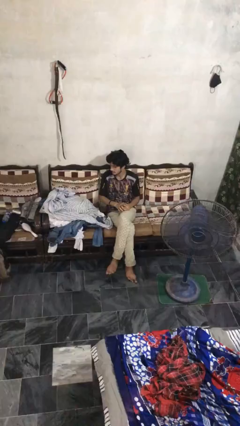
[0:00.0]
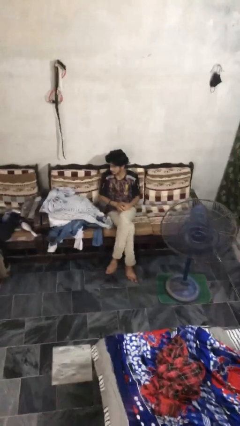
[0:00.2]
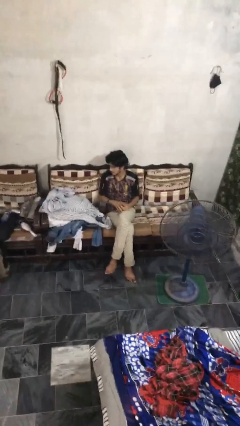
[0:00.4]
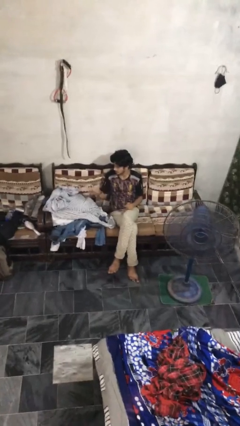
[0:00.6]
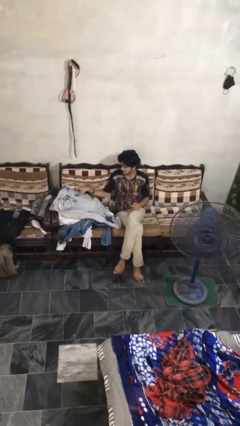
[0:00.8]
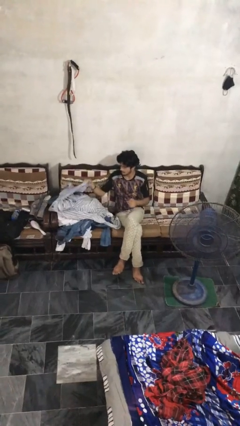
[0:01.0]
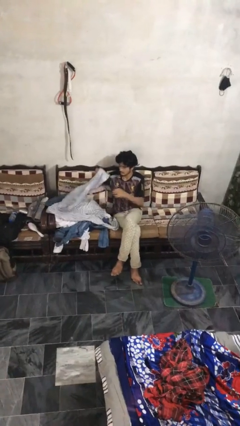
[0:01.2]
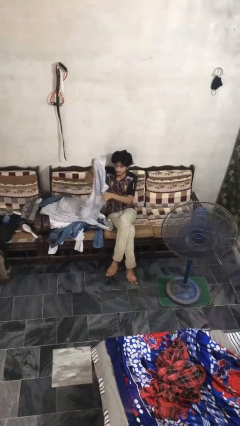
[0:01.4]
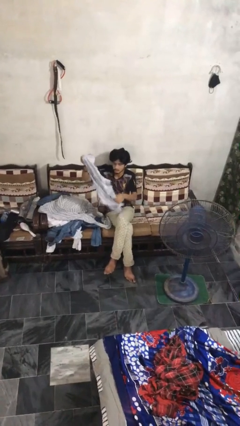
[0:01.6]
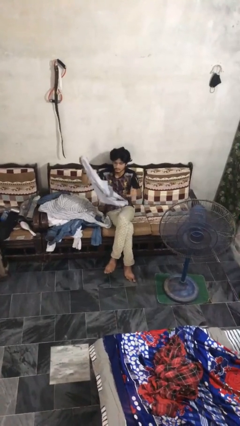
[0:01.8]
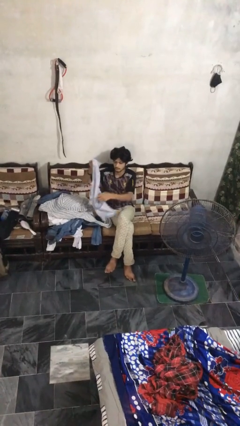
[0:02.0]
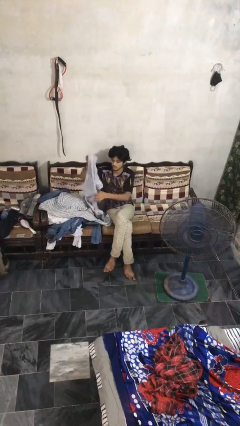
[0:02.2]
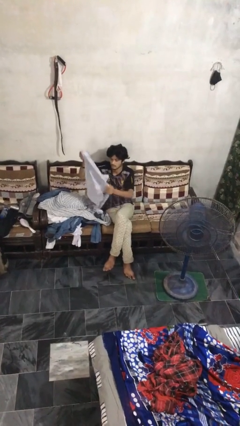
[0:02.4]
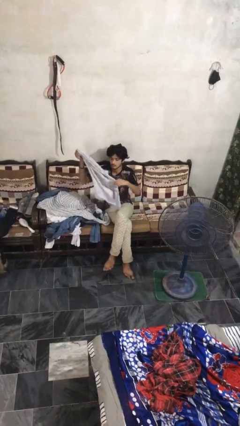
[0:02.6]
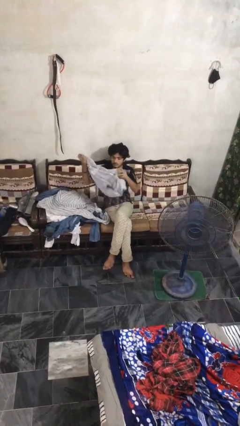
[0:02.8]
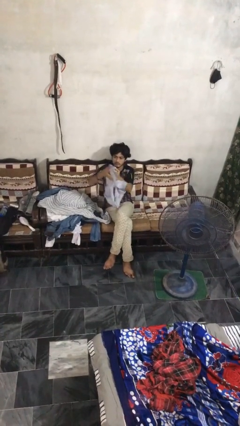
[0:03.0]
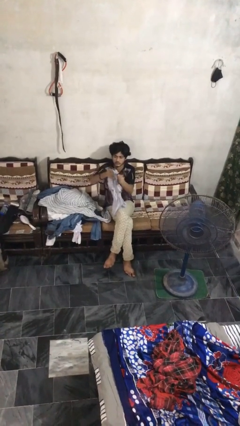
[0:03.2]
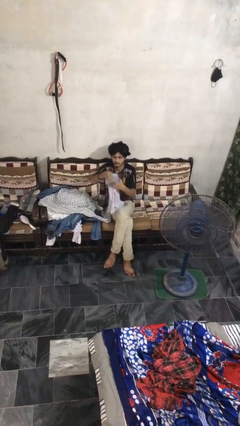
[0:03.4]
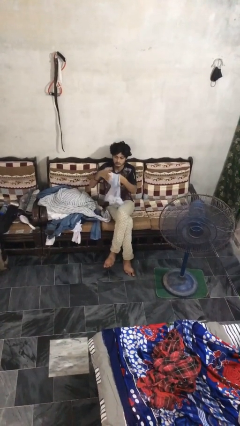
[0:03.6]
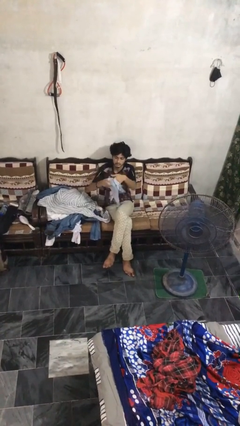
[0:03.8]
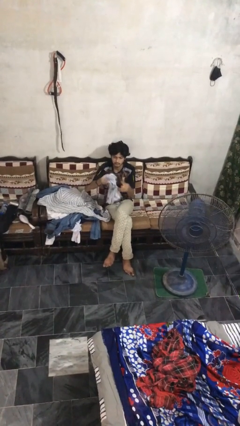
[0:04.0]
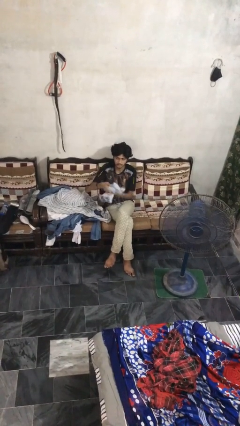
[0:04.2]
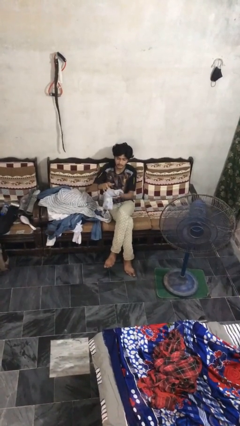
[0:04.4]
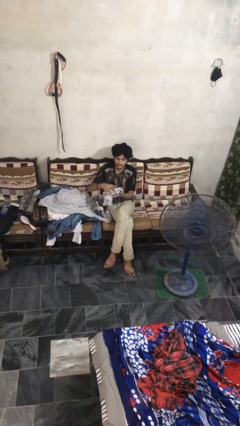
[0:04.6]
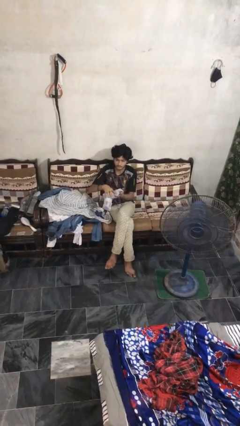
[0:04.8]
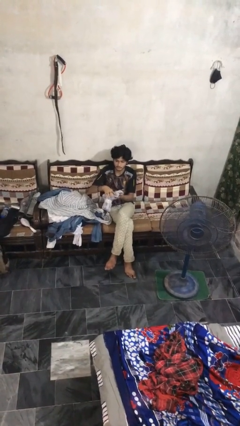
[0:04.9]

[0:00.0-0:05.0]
person folds shirt

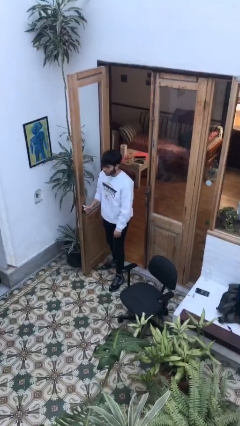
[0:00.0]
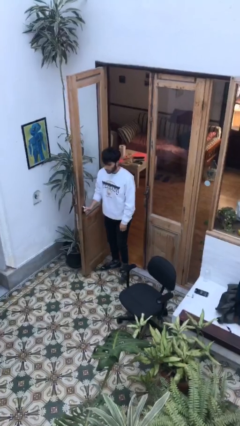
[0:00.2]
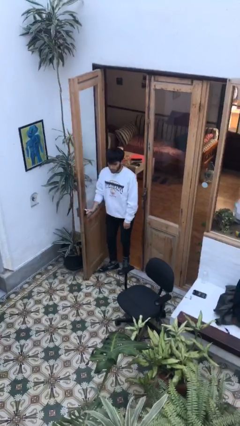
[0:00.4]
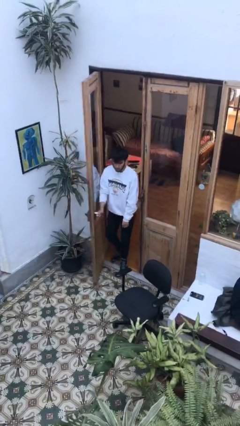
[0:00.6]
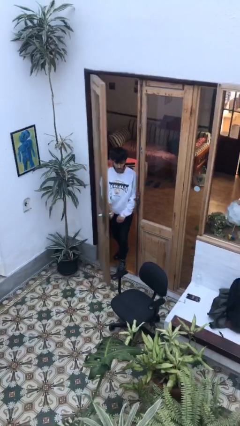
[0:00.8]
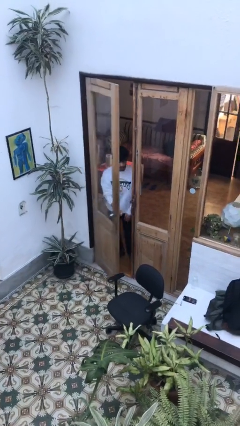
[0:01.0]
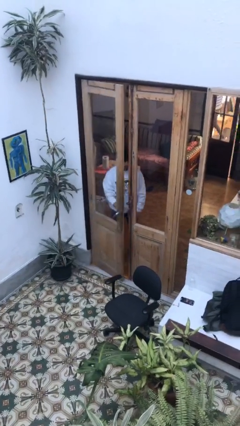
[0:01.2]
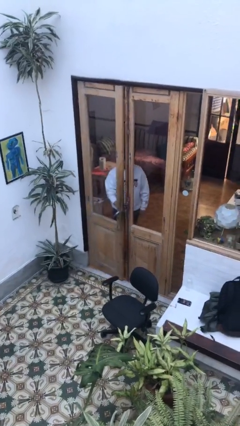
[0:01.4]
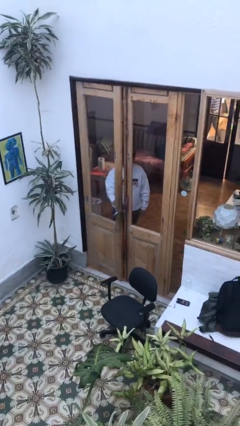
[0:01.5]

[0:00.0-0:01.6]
person closes facility door

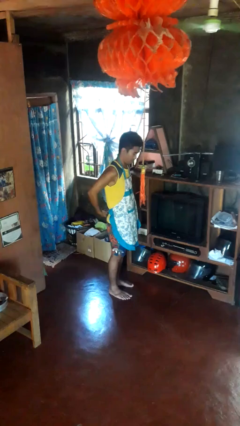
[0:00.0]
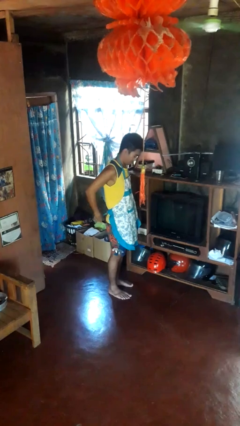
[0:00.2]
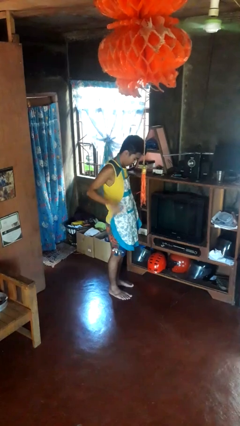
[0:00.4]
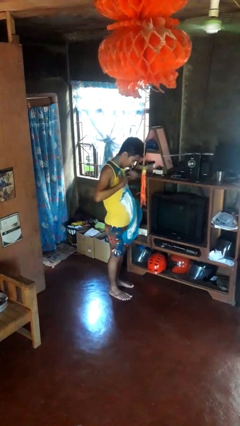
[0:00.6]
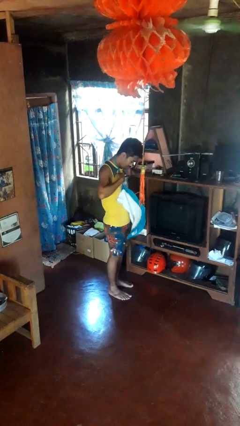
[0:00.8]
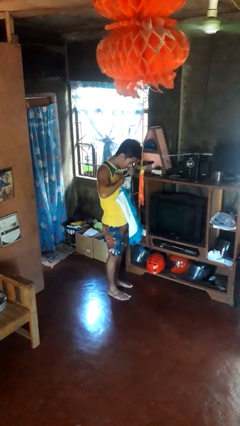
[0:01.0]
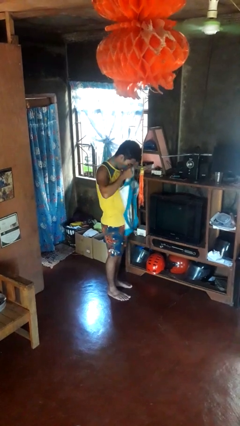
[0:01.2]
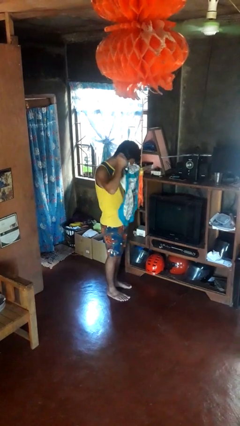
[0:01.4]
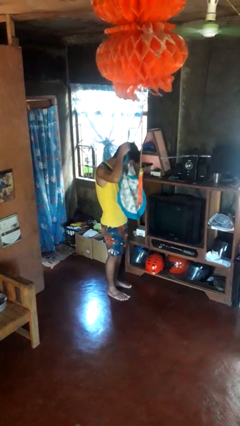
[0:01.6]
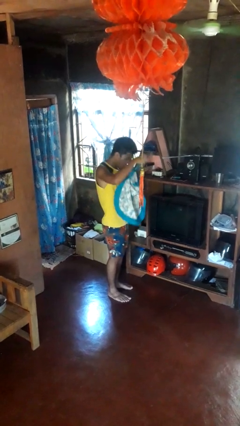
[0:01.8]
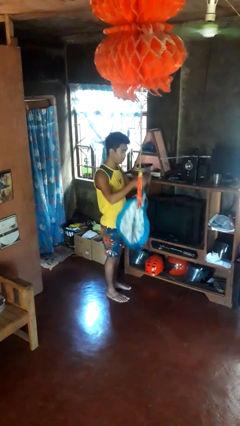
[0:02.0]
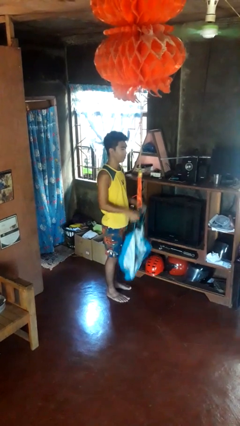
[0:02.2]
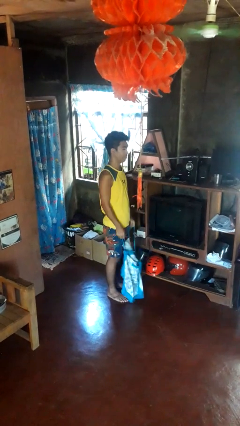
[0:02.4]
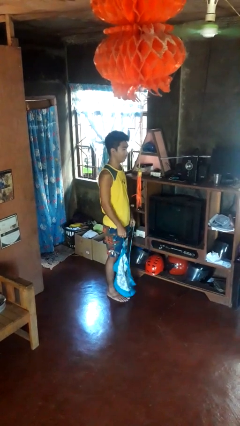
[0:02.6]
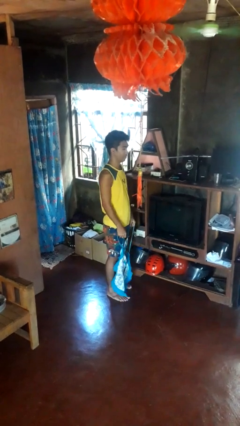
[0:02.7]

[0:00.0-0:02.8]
person takes off apron

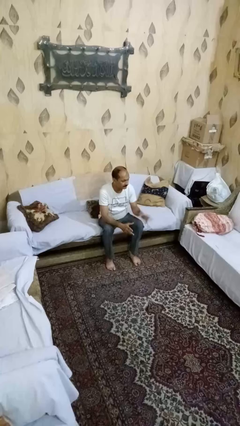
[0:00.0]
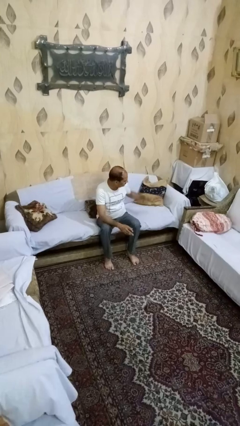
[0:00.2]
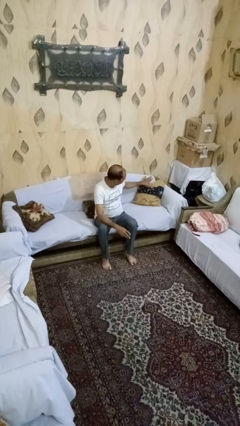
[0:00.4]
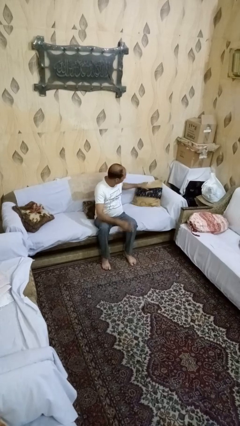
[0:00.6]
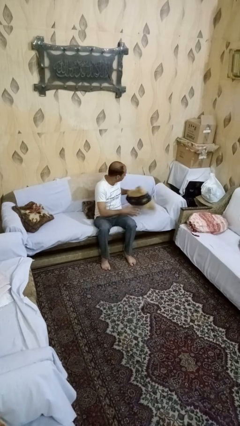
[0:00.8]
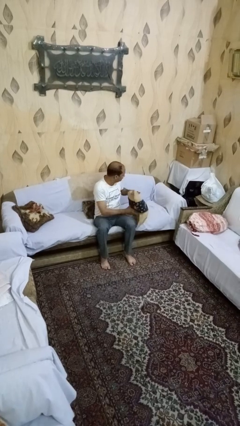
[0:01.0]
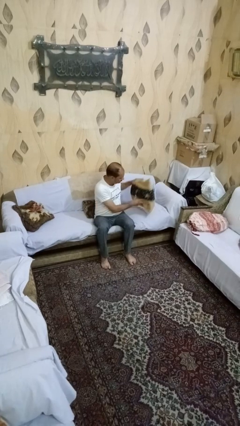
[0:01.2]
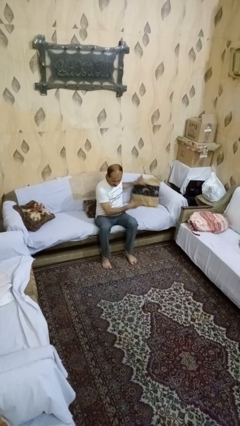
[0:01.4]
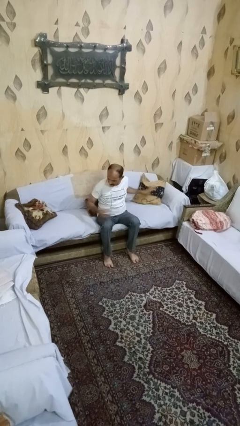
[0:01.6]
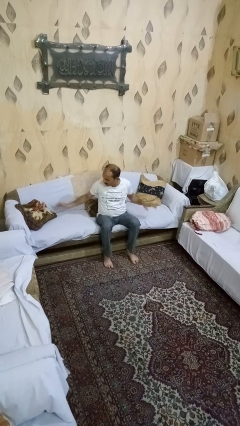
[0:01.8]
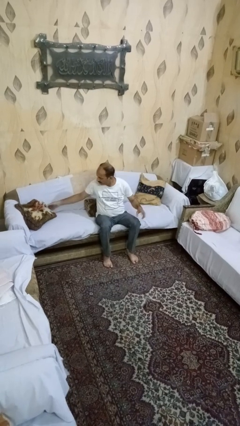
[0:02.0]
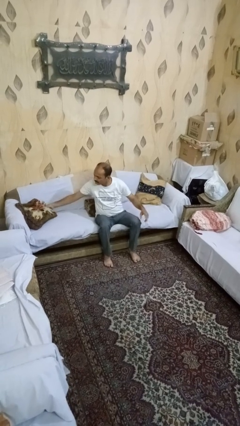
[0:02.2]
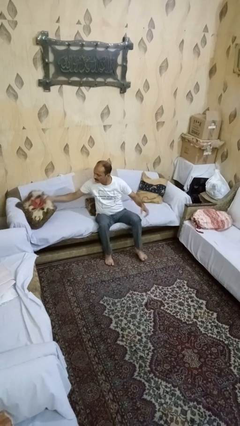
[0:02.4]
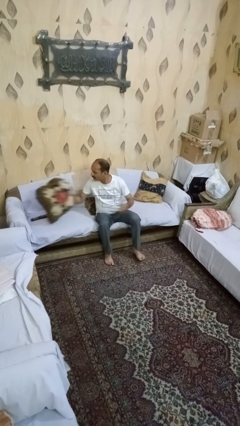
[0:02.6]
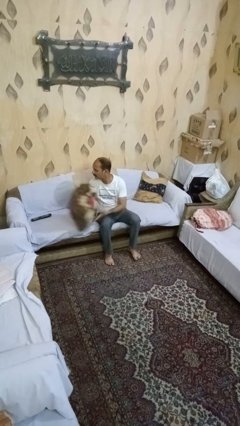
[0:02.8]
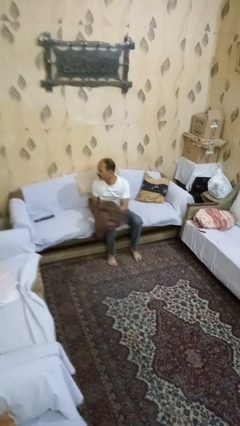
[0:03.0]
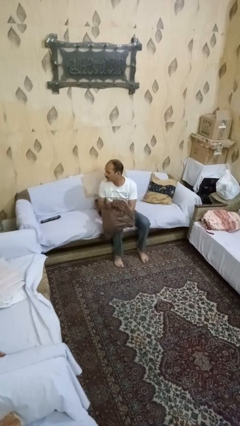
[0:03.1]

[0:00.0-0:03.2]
person searches in couch

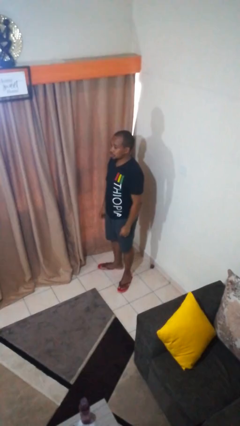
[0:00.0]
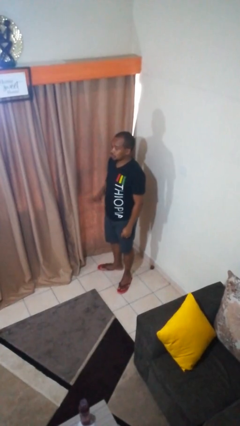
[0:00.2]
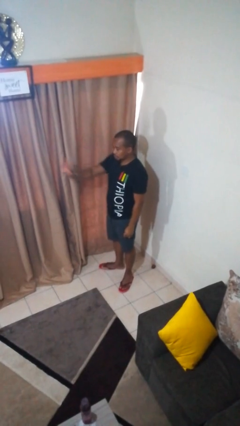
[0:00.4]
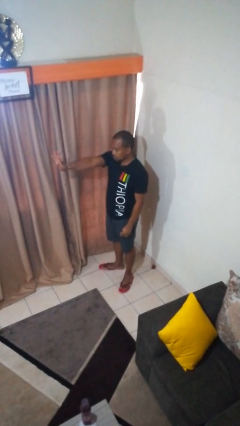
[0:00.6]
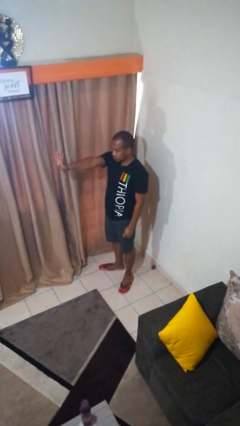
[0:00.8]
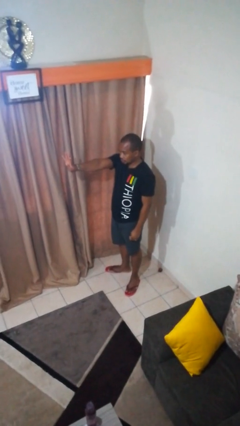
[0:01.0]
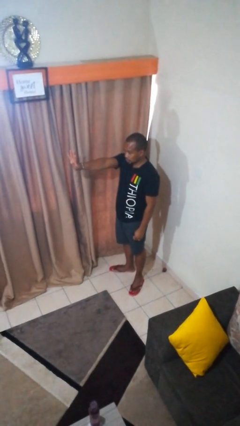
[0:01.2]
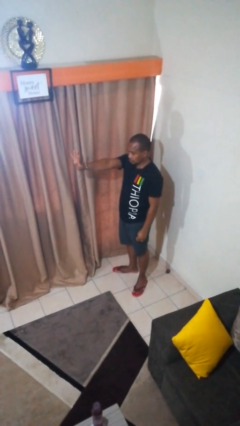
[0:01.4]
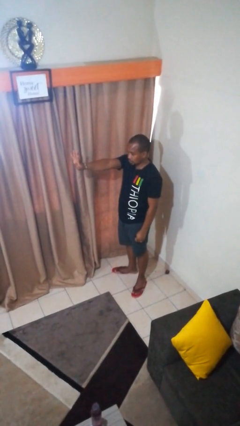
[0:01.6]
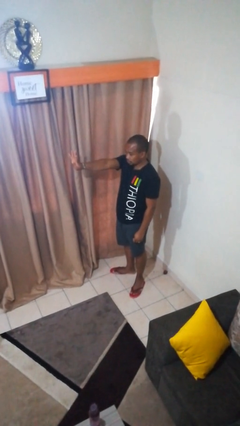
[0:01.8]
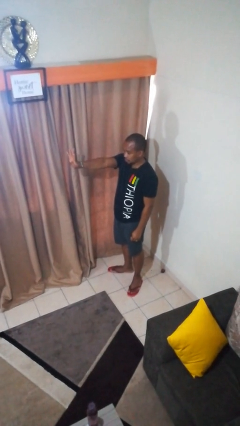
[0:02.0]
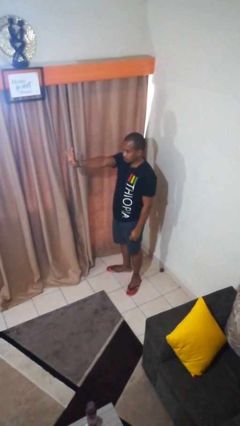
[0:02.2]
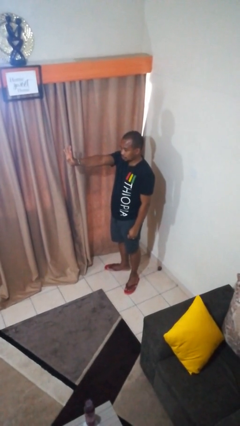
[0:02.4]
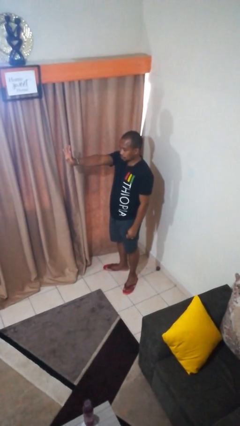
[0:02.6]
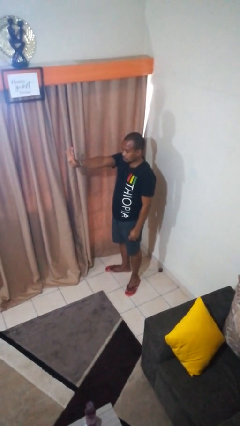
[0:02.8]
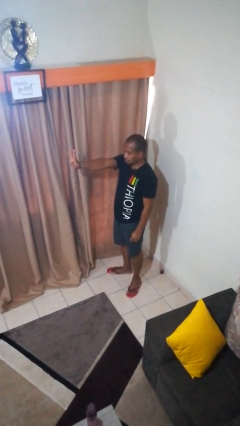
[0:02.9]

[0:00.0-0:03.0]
person gestures number four

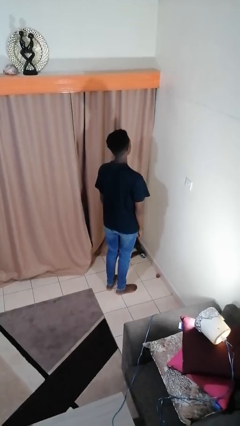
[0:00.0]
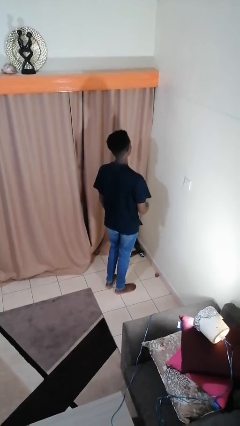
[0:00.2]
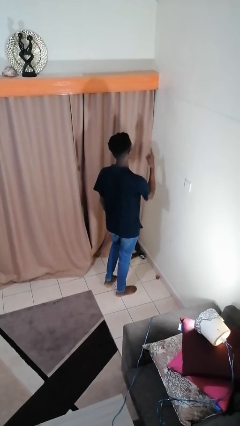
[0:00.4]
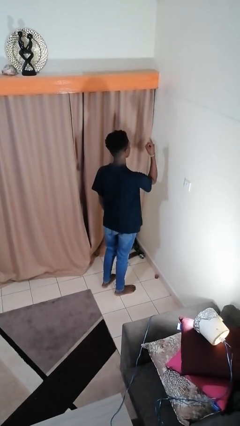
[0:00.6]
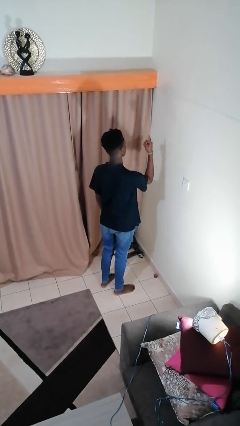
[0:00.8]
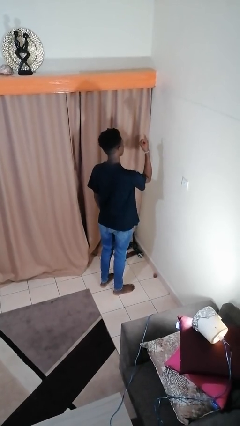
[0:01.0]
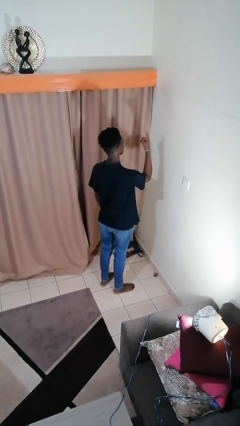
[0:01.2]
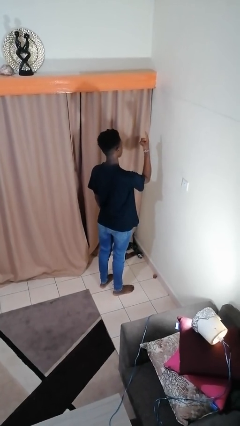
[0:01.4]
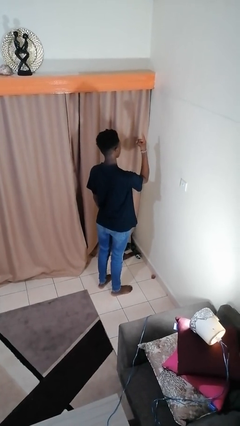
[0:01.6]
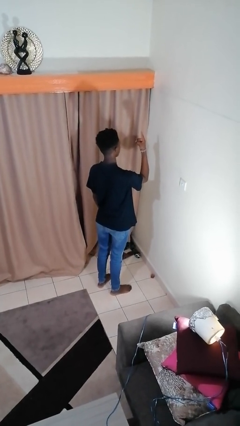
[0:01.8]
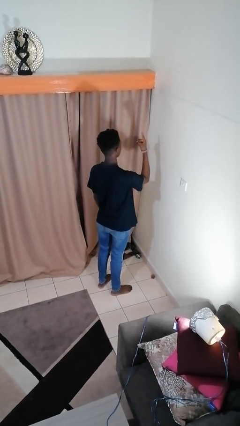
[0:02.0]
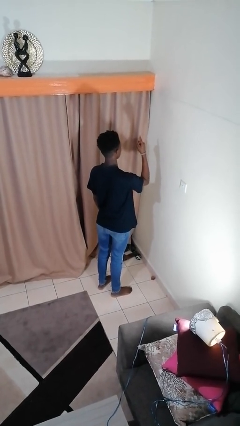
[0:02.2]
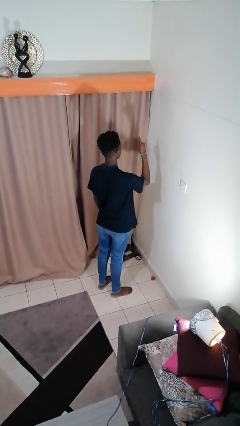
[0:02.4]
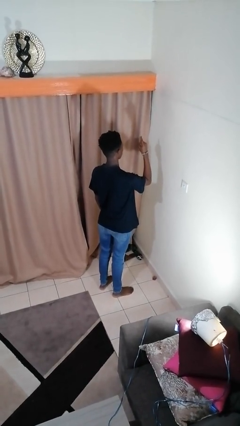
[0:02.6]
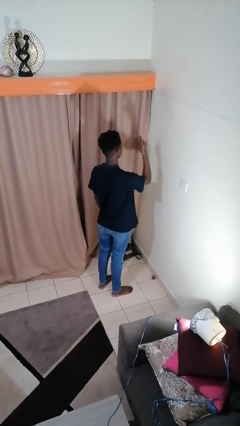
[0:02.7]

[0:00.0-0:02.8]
person gestures number one
